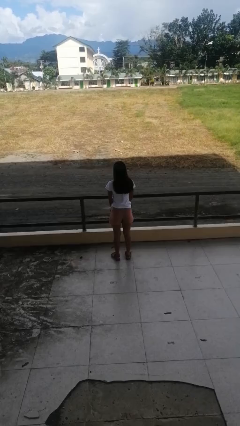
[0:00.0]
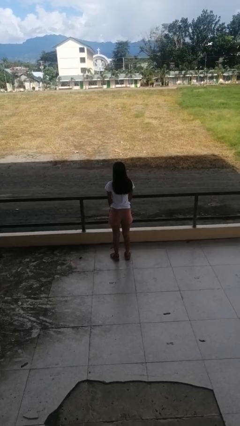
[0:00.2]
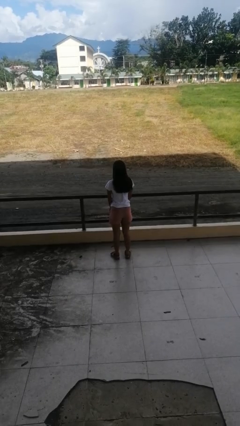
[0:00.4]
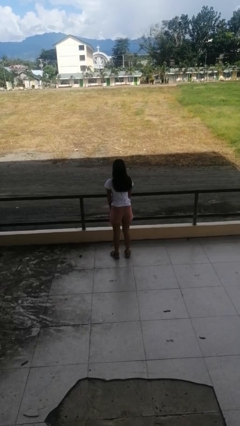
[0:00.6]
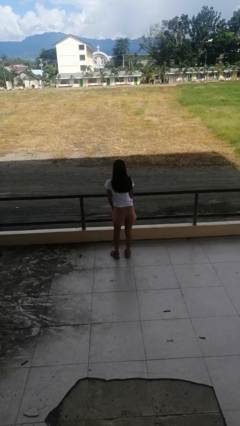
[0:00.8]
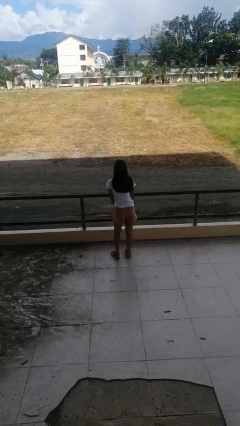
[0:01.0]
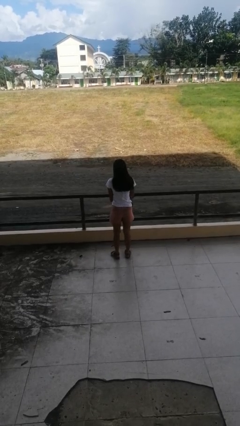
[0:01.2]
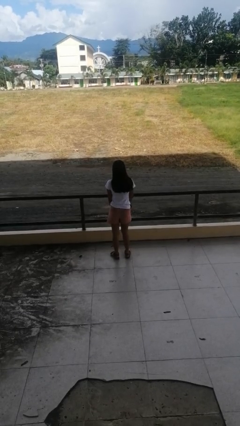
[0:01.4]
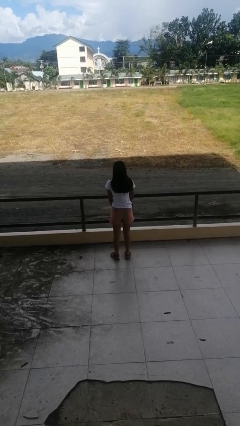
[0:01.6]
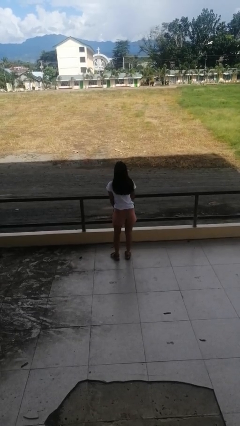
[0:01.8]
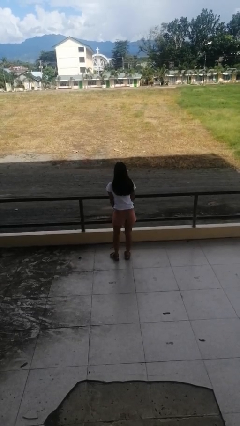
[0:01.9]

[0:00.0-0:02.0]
person wiggles hips

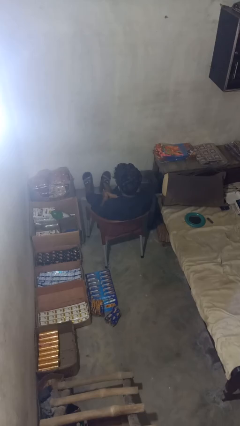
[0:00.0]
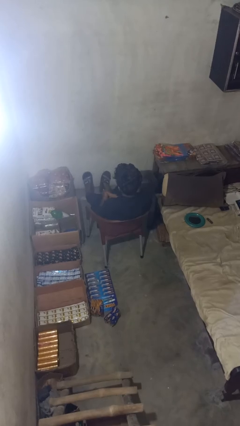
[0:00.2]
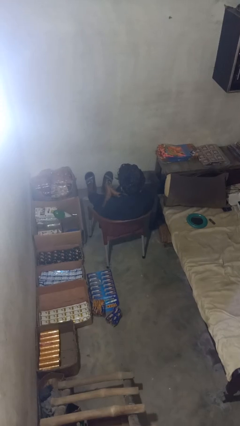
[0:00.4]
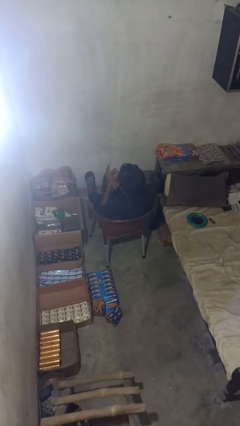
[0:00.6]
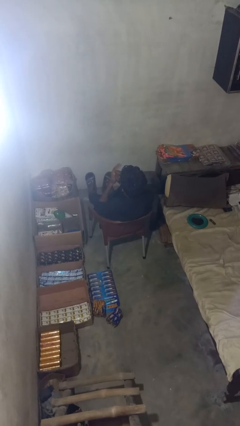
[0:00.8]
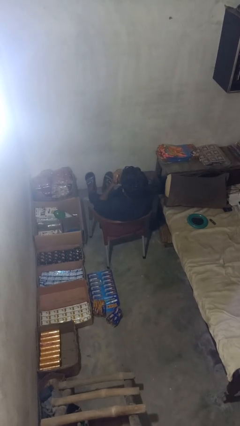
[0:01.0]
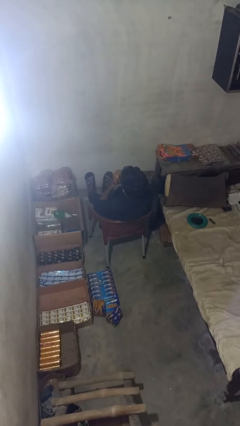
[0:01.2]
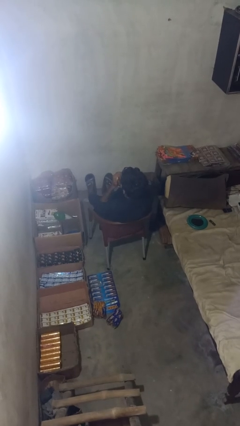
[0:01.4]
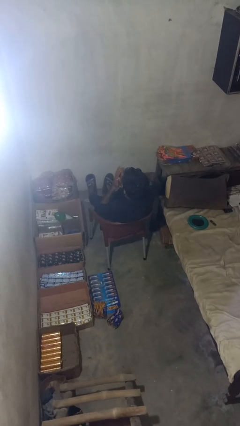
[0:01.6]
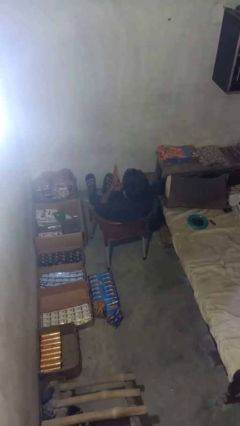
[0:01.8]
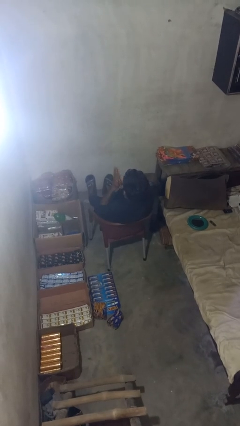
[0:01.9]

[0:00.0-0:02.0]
person blows into hands

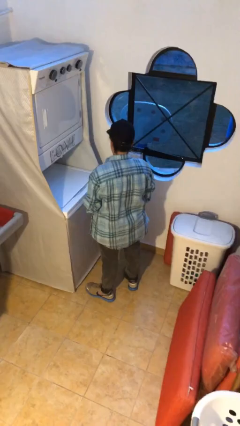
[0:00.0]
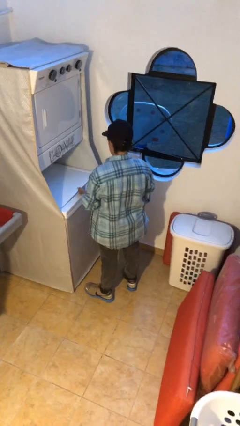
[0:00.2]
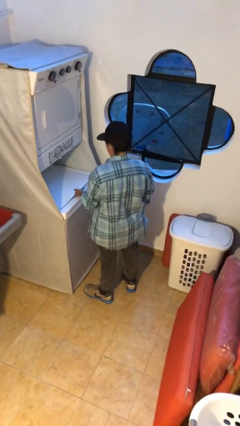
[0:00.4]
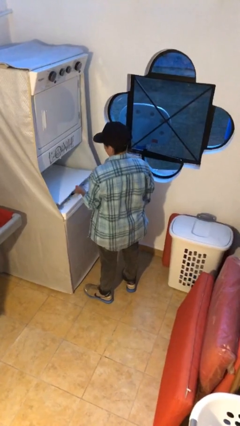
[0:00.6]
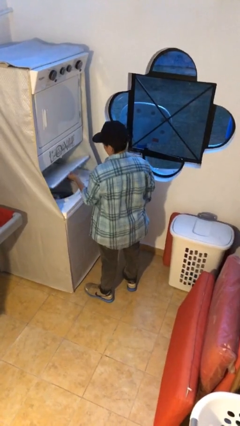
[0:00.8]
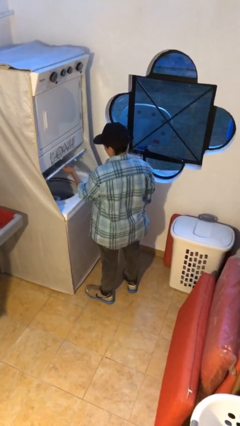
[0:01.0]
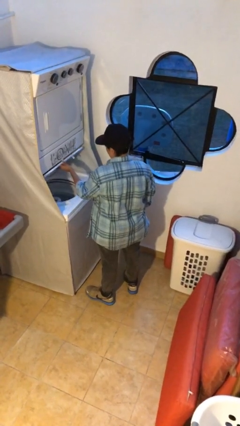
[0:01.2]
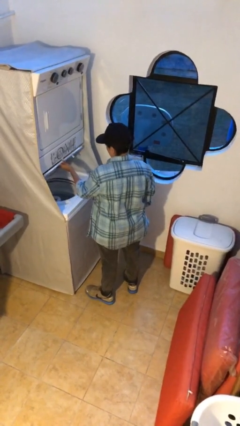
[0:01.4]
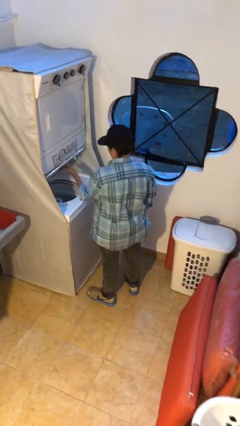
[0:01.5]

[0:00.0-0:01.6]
person opens clothes washer

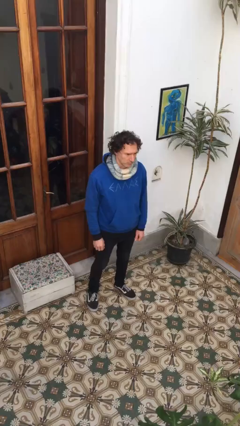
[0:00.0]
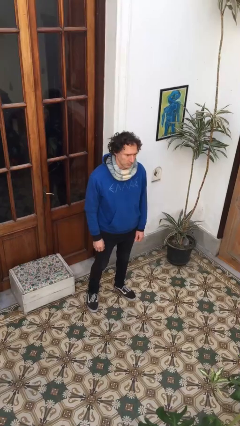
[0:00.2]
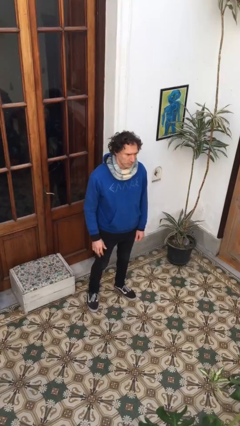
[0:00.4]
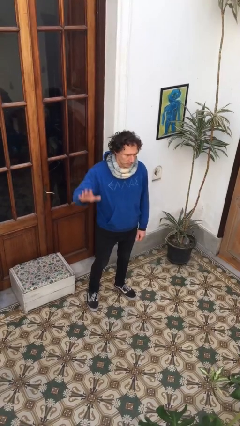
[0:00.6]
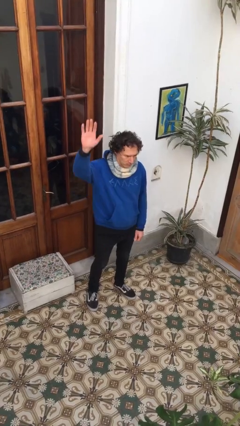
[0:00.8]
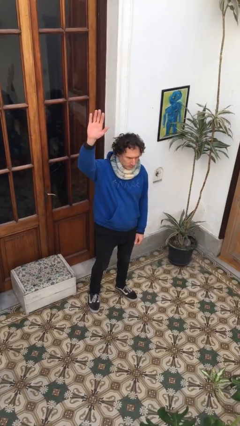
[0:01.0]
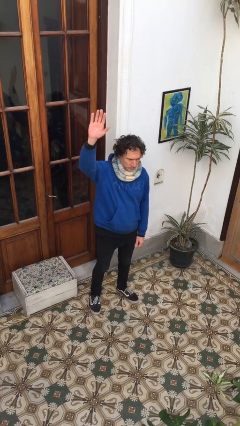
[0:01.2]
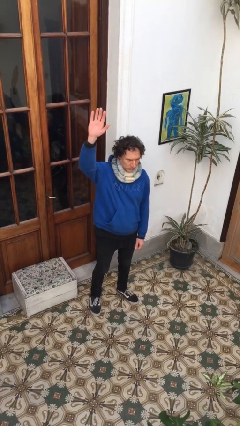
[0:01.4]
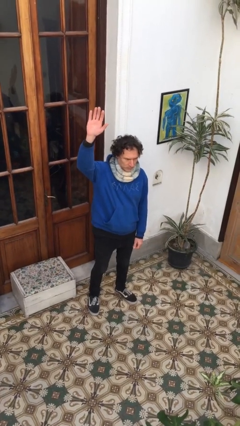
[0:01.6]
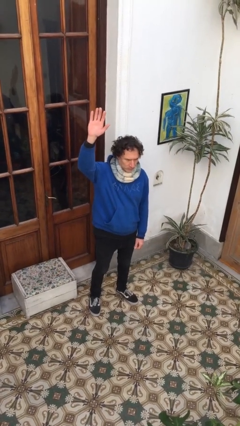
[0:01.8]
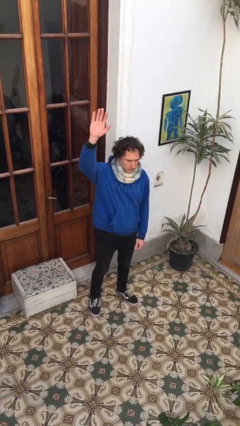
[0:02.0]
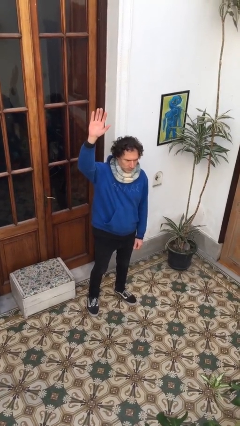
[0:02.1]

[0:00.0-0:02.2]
person gestures raise hand

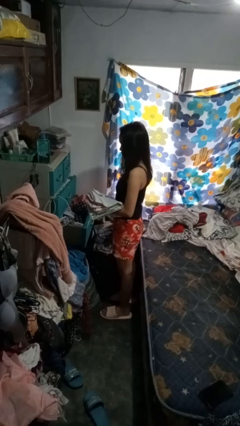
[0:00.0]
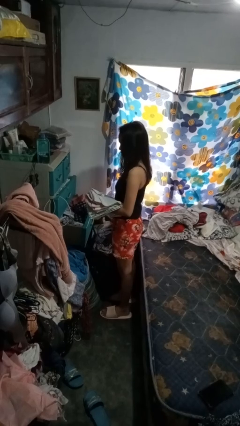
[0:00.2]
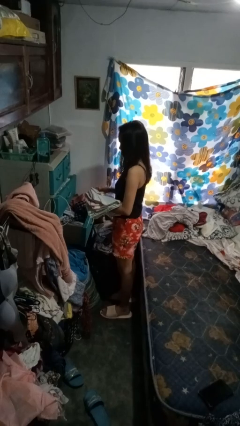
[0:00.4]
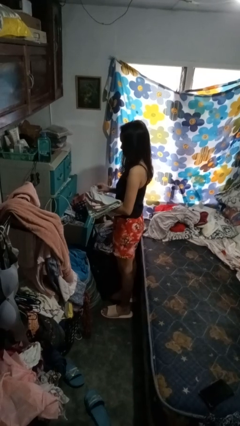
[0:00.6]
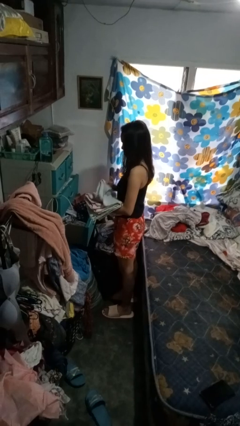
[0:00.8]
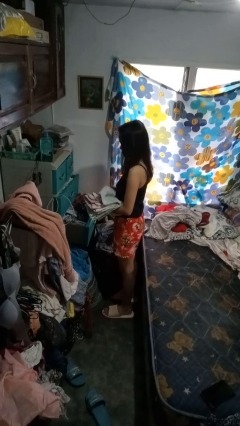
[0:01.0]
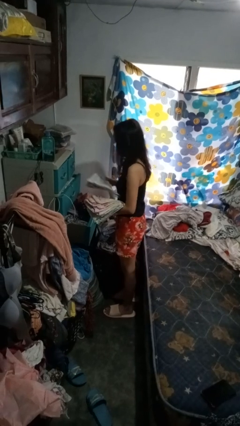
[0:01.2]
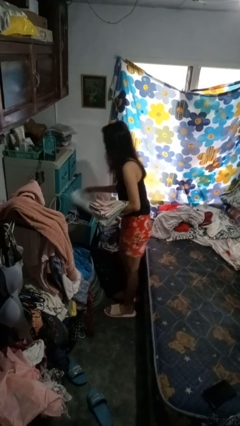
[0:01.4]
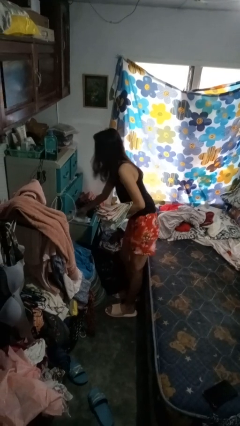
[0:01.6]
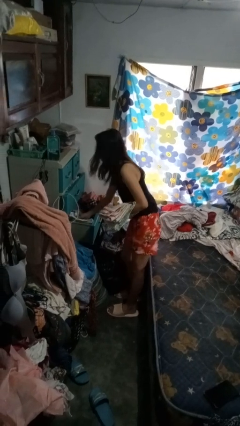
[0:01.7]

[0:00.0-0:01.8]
person puts clothes into dresser

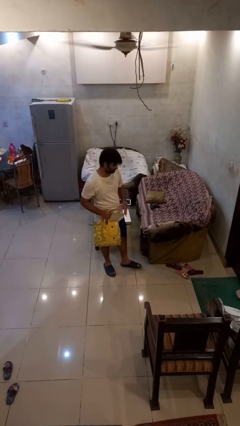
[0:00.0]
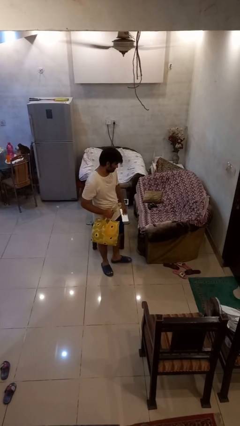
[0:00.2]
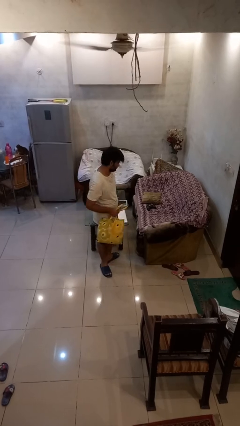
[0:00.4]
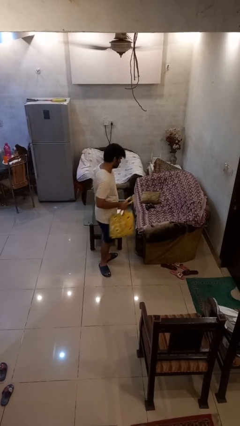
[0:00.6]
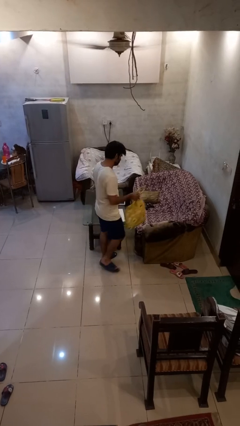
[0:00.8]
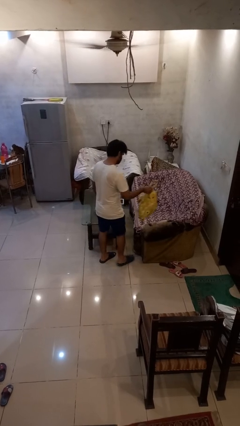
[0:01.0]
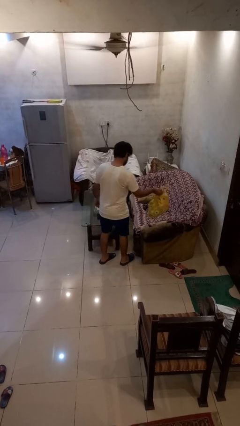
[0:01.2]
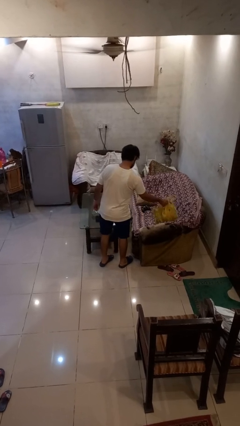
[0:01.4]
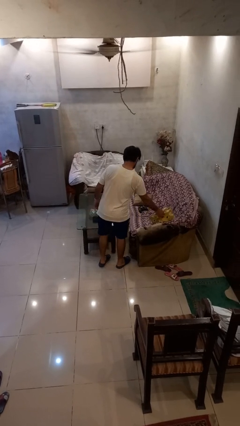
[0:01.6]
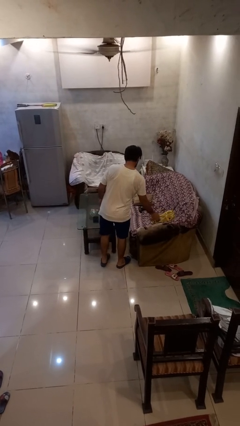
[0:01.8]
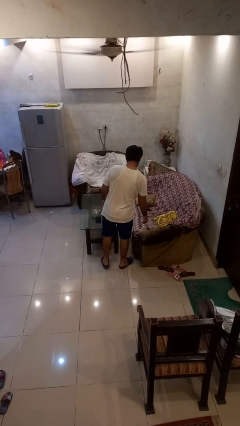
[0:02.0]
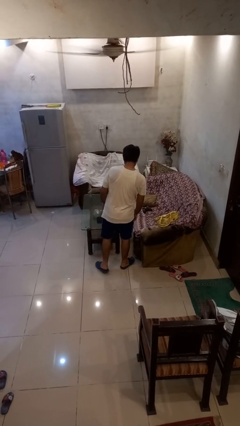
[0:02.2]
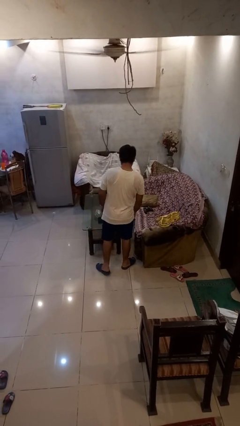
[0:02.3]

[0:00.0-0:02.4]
person puts down object on couch

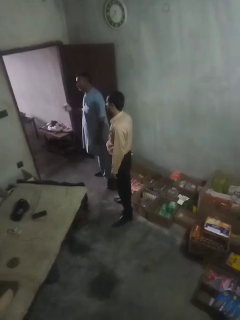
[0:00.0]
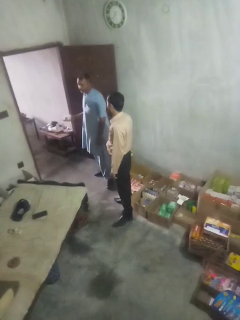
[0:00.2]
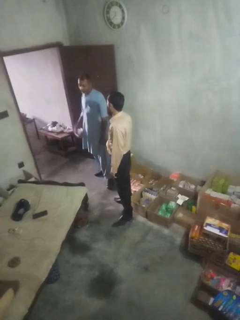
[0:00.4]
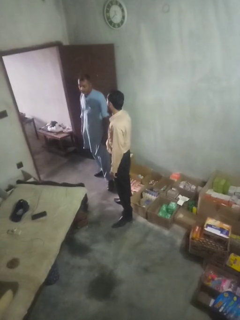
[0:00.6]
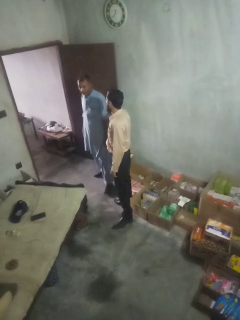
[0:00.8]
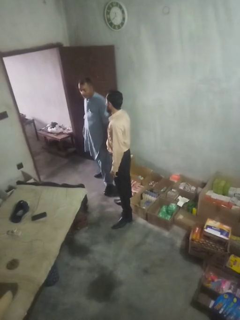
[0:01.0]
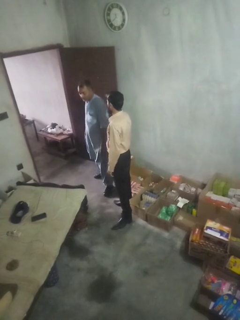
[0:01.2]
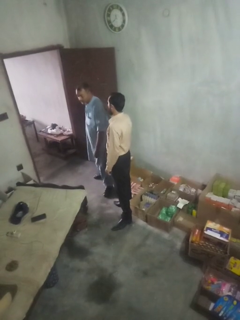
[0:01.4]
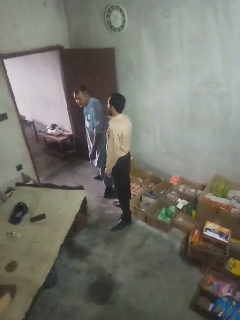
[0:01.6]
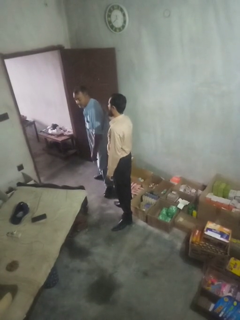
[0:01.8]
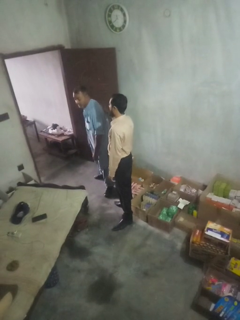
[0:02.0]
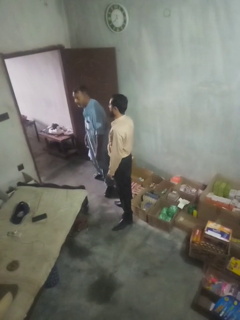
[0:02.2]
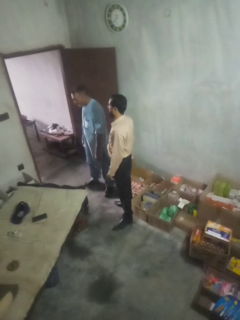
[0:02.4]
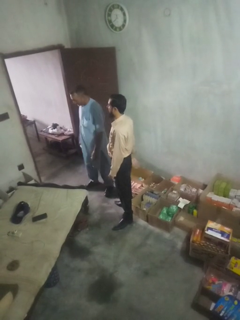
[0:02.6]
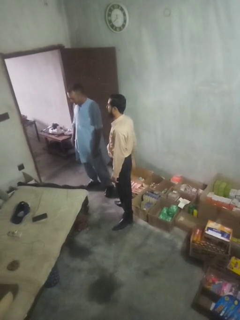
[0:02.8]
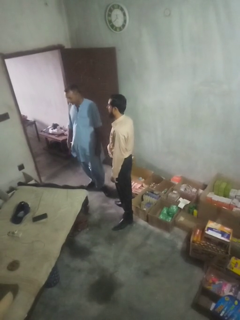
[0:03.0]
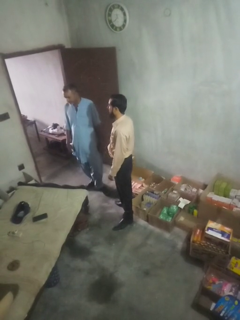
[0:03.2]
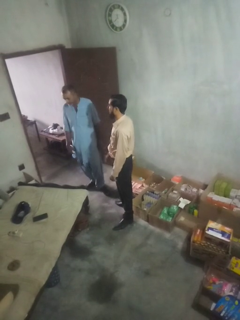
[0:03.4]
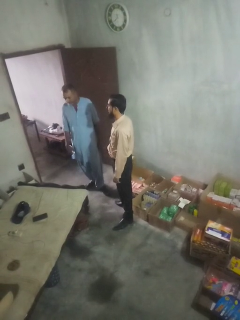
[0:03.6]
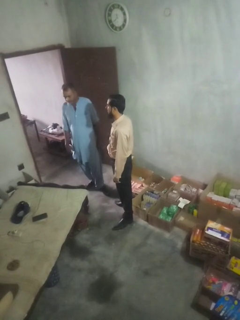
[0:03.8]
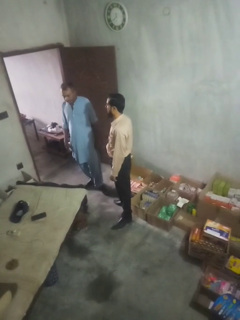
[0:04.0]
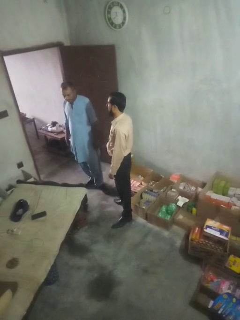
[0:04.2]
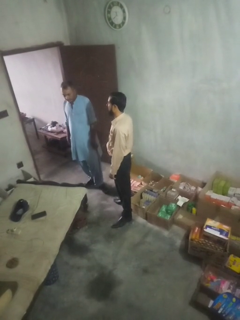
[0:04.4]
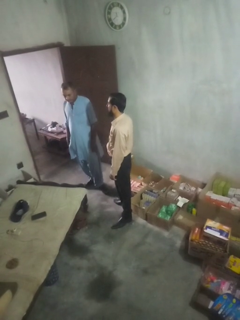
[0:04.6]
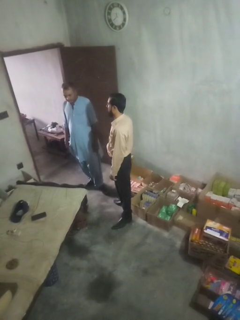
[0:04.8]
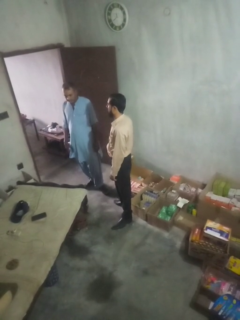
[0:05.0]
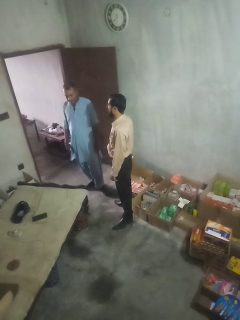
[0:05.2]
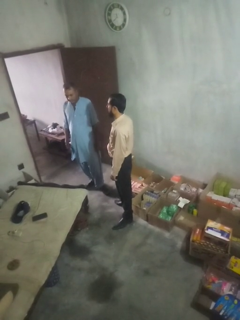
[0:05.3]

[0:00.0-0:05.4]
person touches back of person

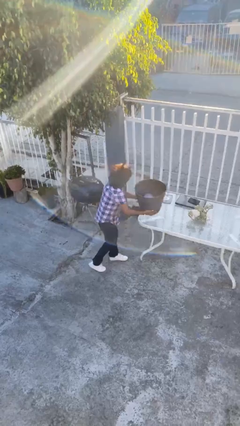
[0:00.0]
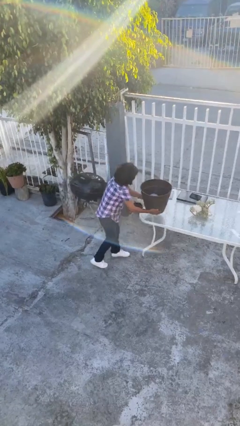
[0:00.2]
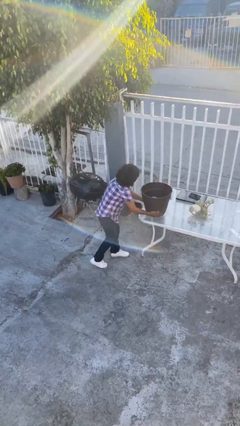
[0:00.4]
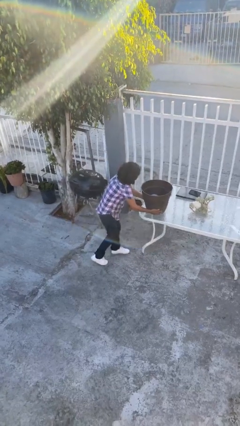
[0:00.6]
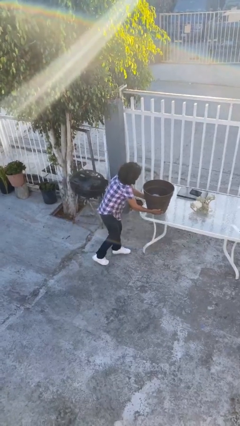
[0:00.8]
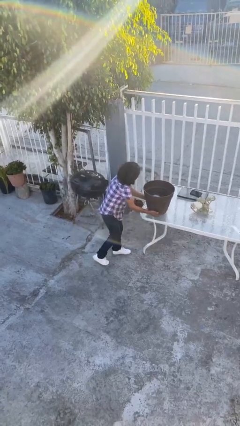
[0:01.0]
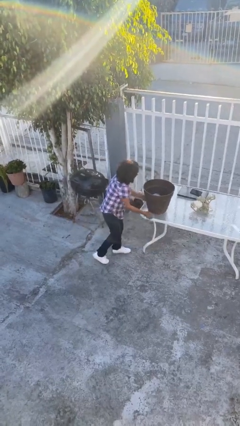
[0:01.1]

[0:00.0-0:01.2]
person puts down object on table
